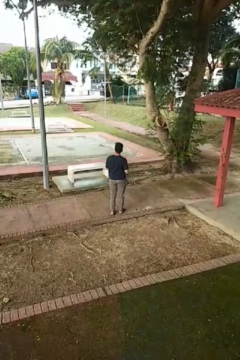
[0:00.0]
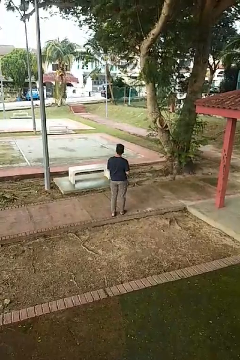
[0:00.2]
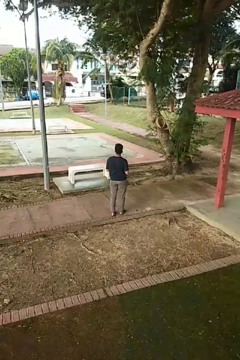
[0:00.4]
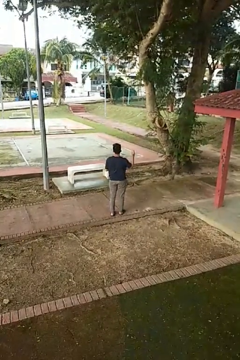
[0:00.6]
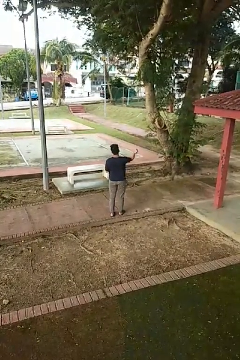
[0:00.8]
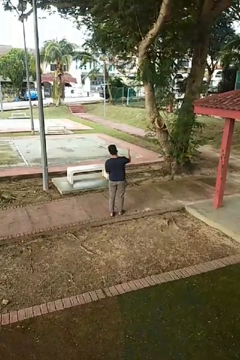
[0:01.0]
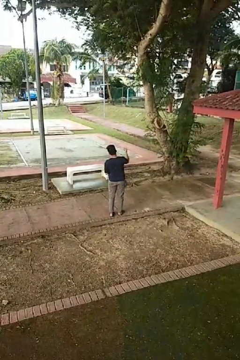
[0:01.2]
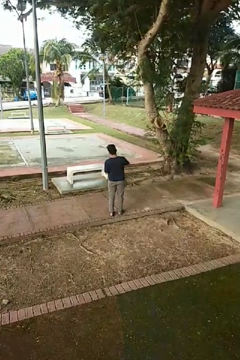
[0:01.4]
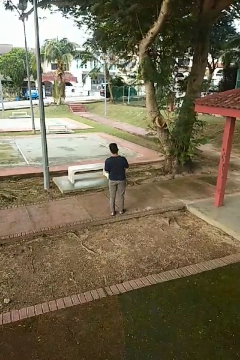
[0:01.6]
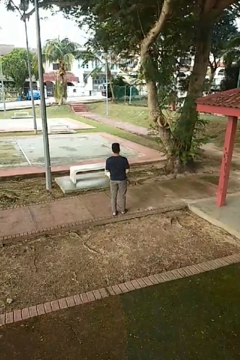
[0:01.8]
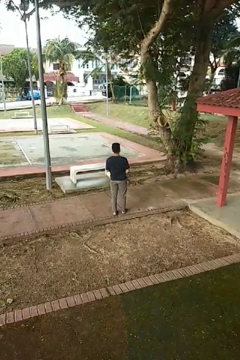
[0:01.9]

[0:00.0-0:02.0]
person karate chop

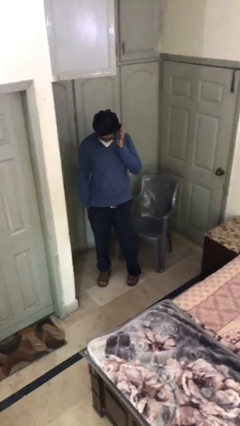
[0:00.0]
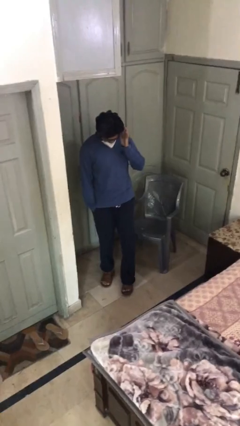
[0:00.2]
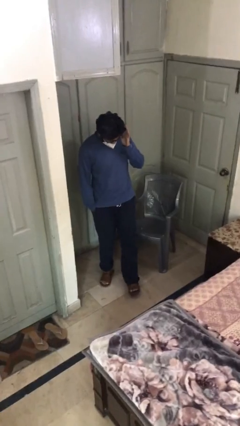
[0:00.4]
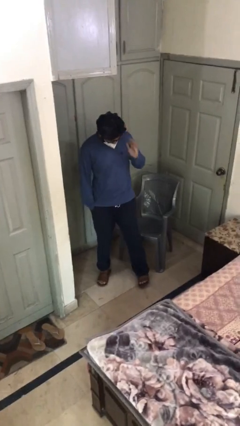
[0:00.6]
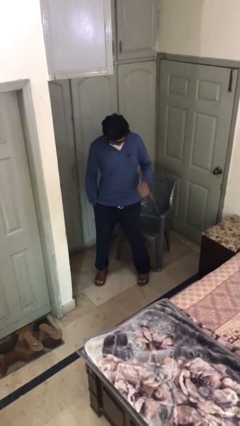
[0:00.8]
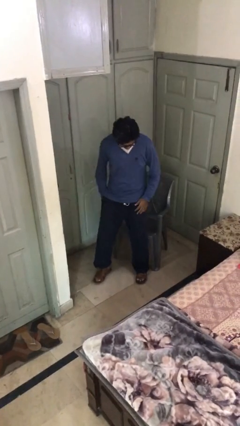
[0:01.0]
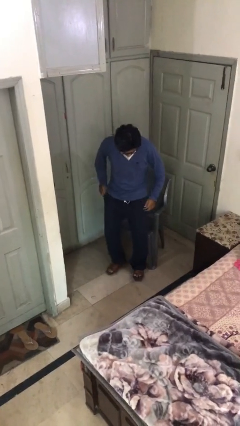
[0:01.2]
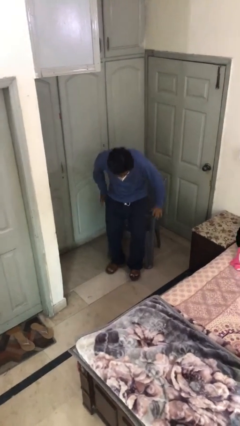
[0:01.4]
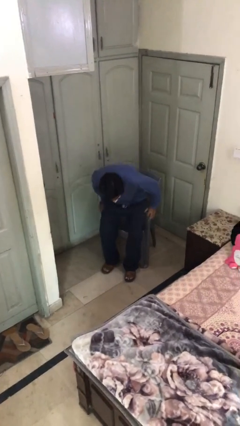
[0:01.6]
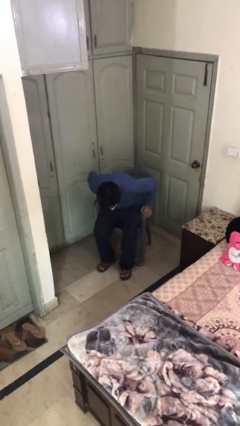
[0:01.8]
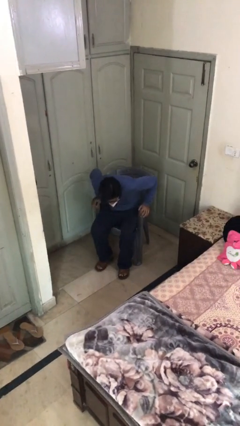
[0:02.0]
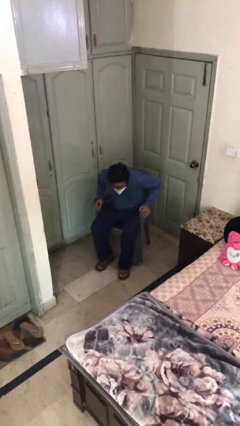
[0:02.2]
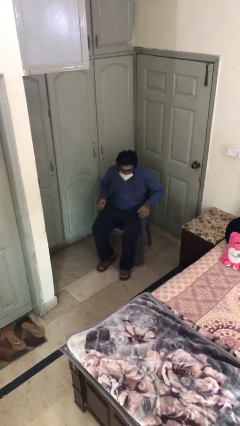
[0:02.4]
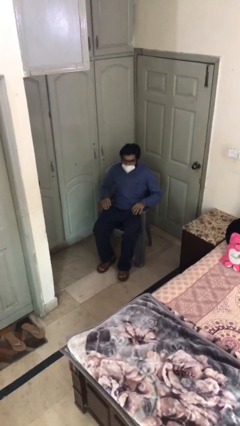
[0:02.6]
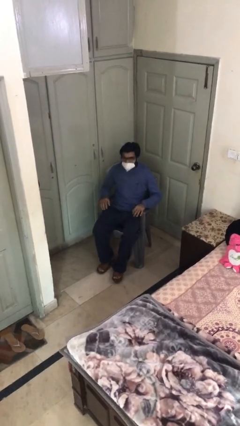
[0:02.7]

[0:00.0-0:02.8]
person sits down

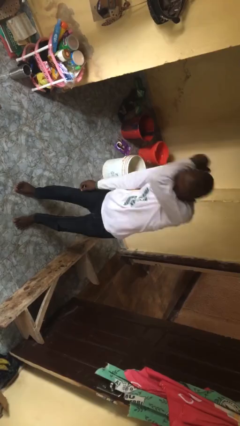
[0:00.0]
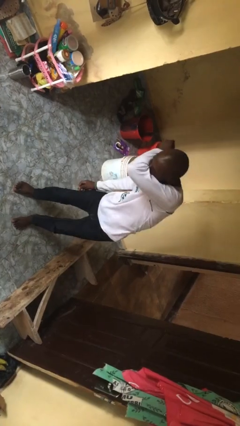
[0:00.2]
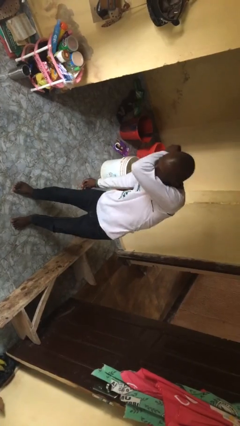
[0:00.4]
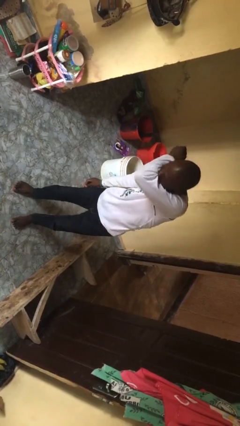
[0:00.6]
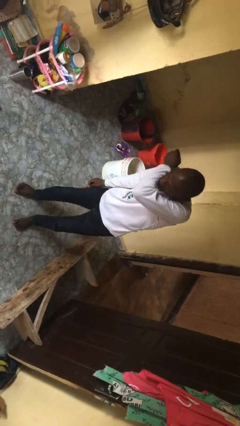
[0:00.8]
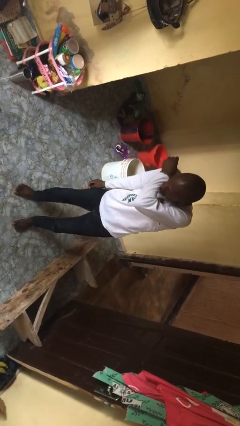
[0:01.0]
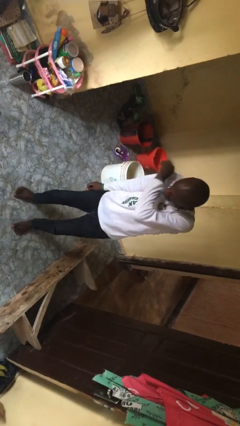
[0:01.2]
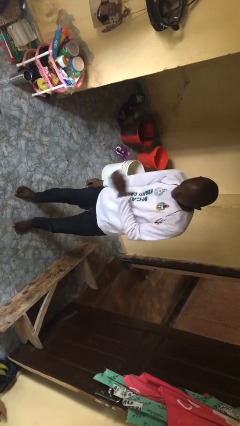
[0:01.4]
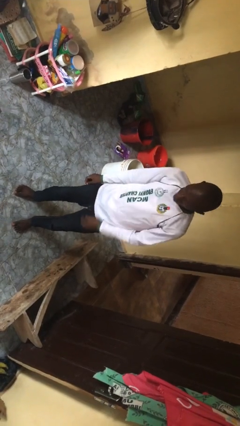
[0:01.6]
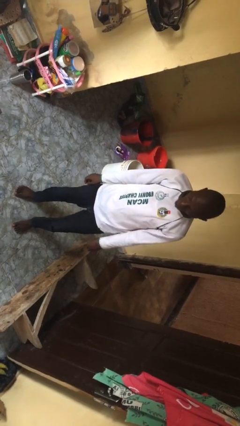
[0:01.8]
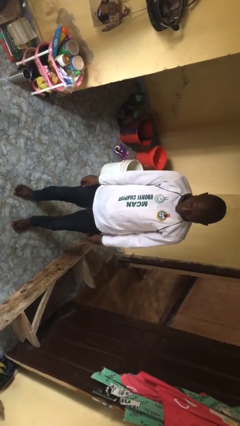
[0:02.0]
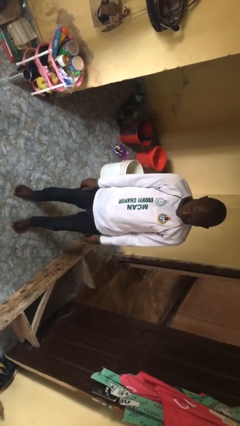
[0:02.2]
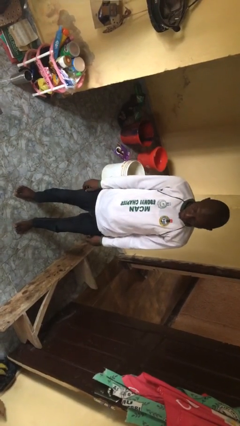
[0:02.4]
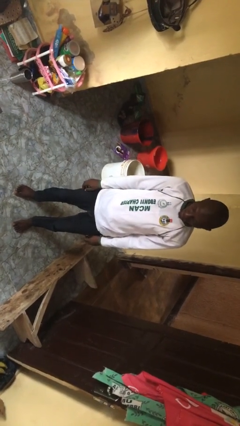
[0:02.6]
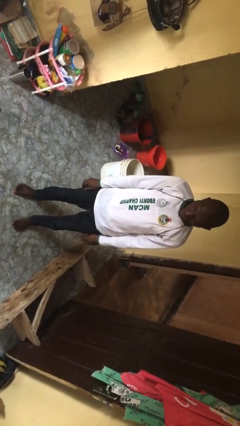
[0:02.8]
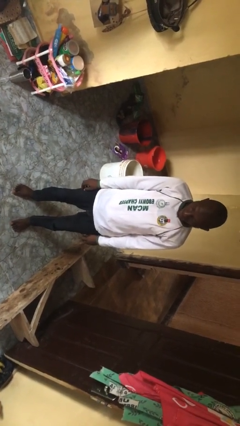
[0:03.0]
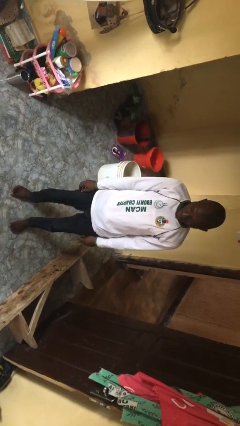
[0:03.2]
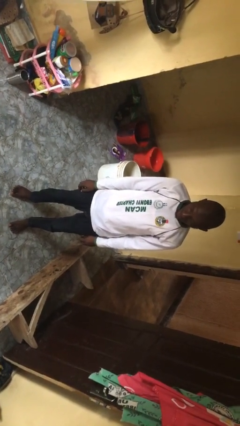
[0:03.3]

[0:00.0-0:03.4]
person sneezes into arm

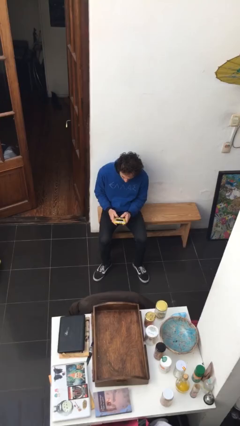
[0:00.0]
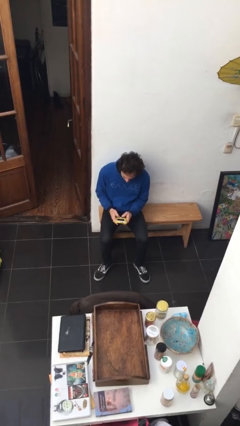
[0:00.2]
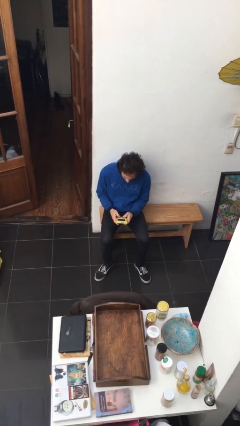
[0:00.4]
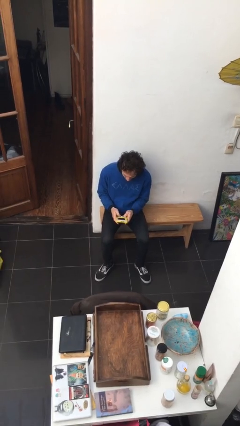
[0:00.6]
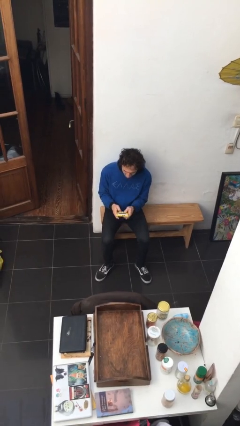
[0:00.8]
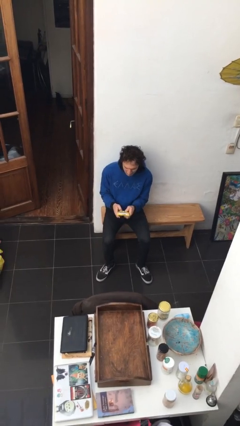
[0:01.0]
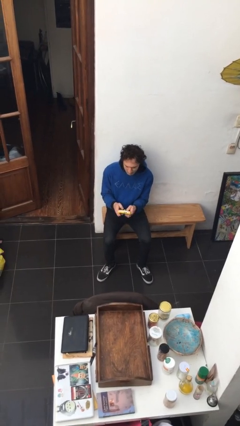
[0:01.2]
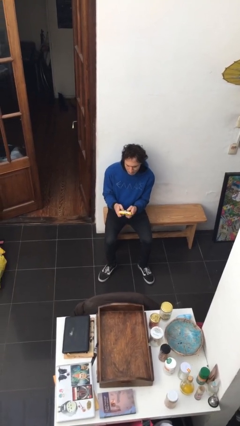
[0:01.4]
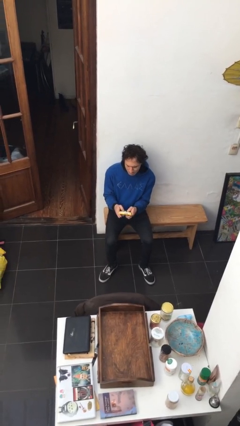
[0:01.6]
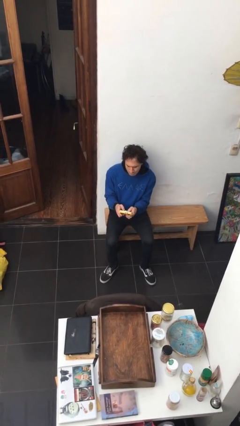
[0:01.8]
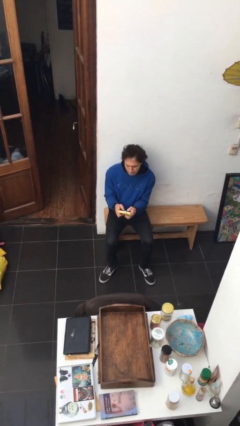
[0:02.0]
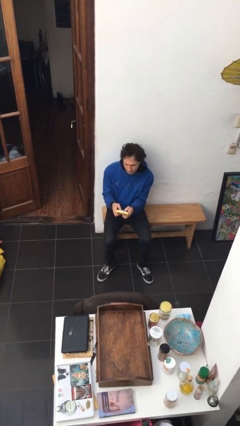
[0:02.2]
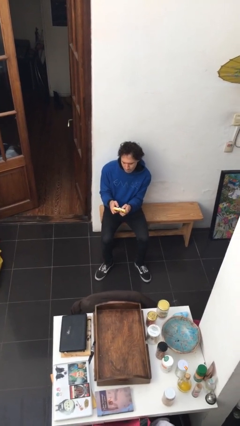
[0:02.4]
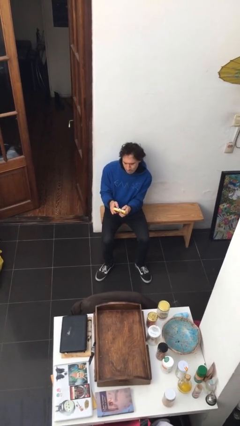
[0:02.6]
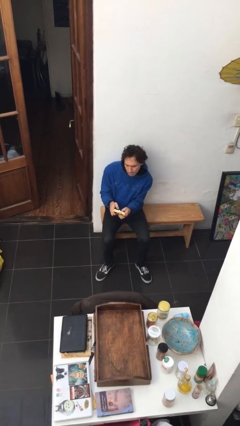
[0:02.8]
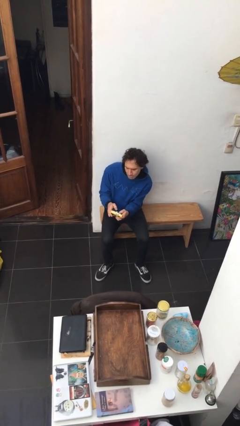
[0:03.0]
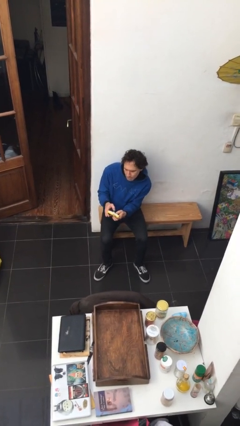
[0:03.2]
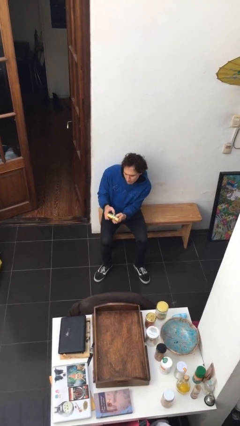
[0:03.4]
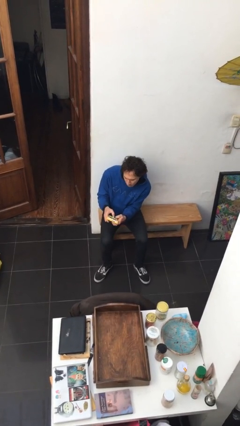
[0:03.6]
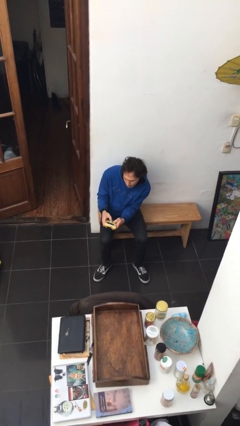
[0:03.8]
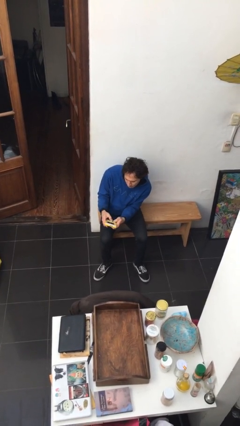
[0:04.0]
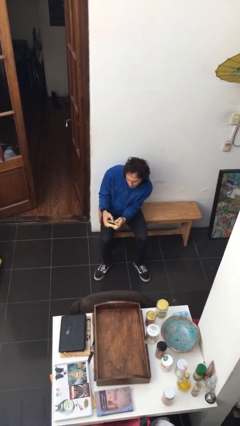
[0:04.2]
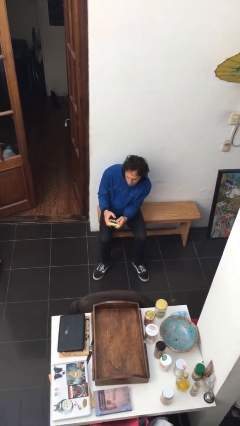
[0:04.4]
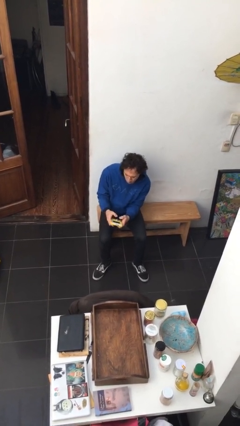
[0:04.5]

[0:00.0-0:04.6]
person interacts with handheld game

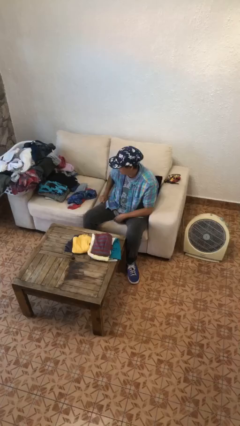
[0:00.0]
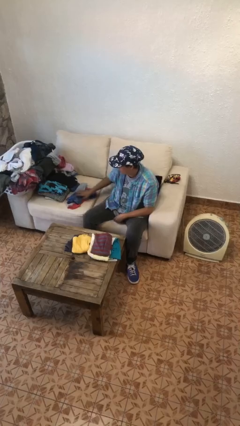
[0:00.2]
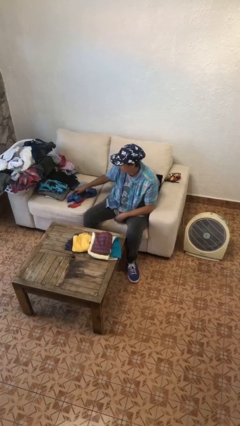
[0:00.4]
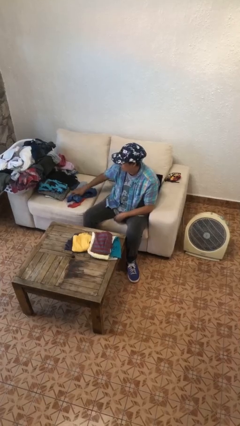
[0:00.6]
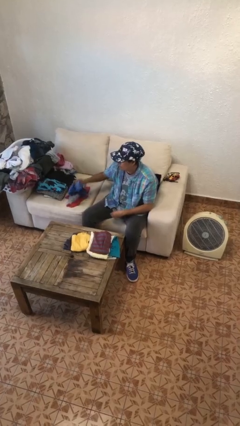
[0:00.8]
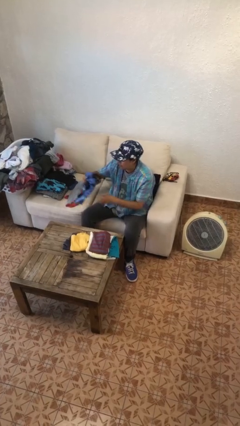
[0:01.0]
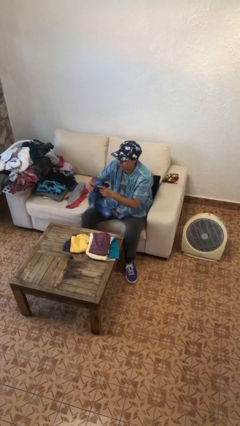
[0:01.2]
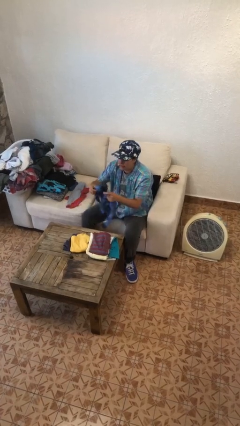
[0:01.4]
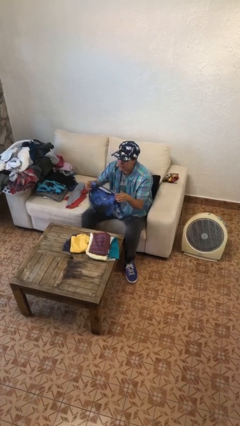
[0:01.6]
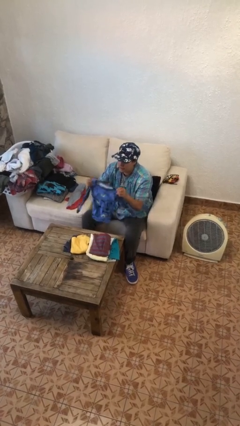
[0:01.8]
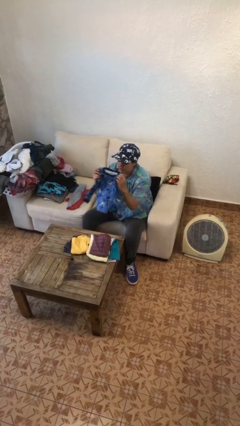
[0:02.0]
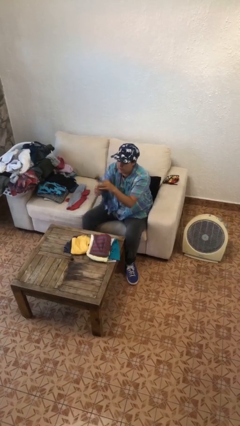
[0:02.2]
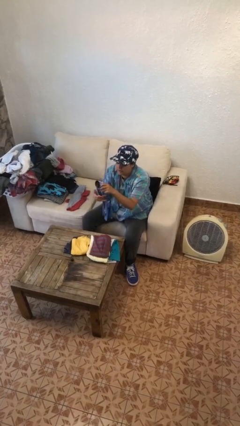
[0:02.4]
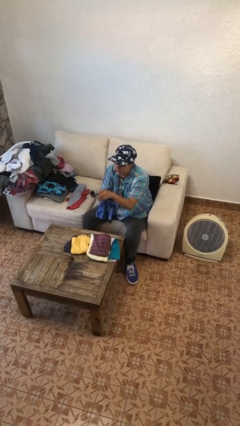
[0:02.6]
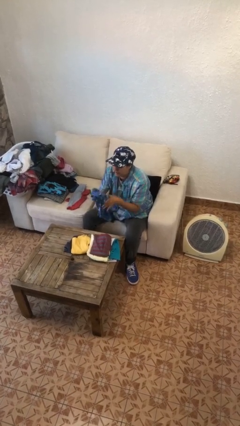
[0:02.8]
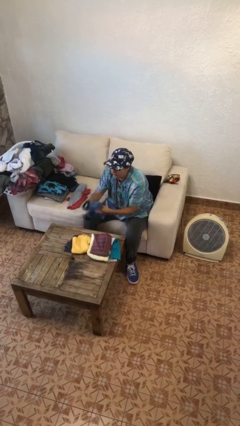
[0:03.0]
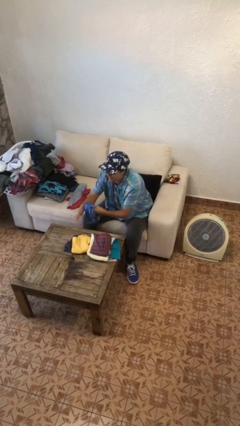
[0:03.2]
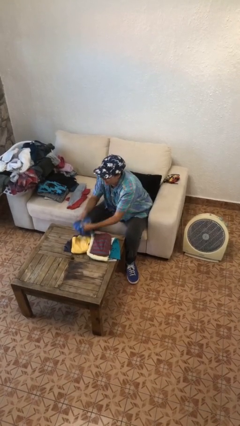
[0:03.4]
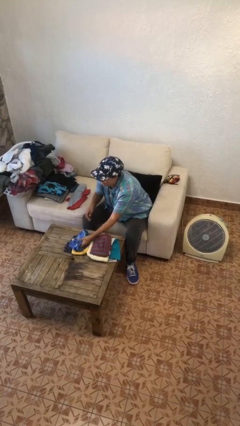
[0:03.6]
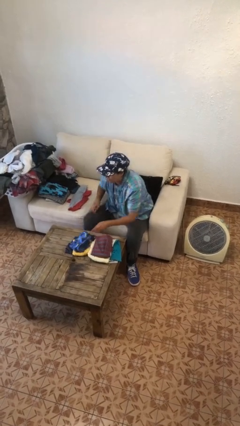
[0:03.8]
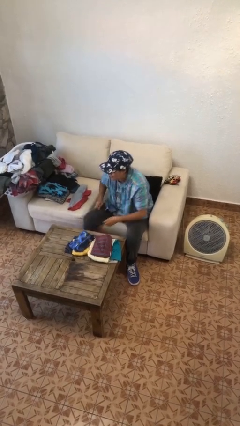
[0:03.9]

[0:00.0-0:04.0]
person folds shirt

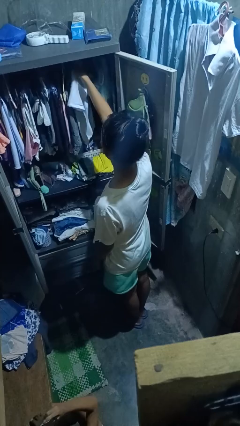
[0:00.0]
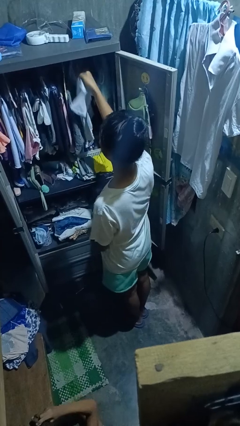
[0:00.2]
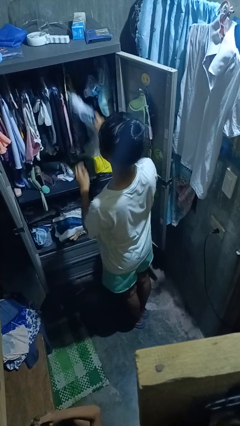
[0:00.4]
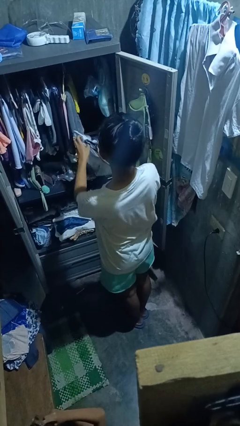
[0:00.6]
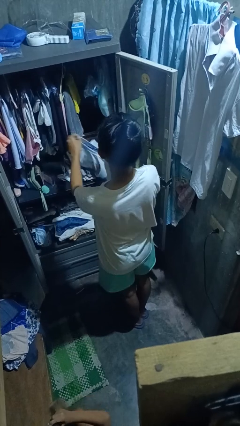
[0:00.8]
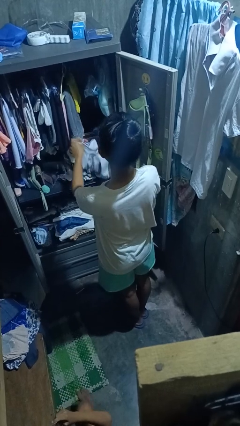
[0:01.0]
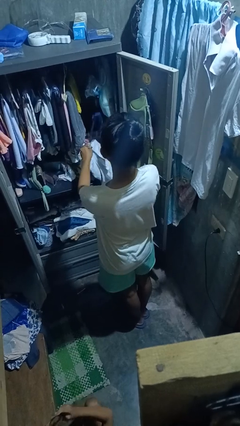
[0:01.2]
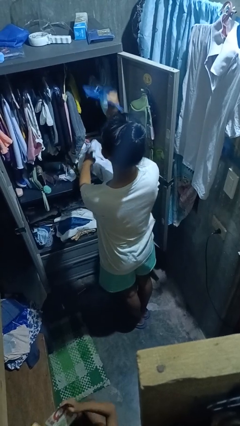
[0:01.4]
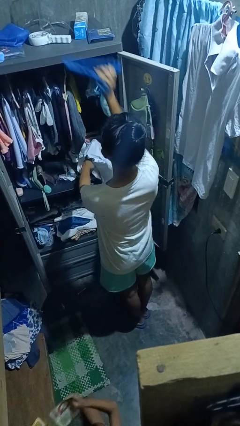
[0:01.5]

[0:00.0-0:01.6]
person takes clothes from closet
